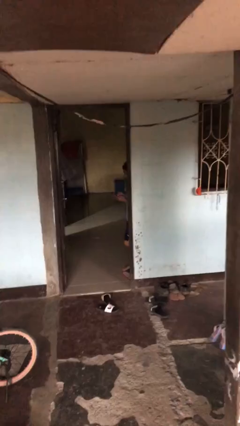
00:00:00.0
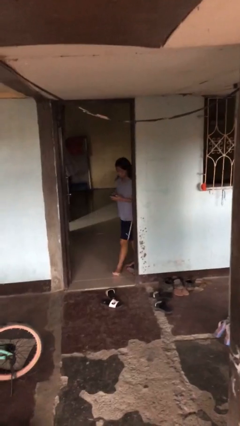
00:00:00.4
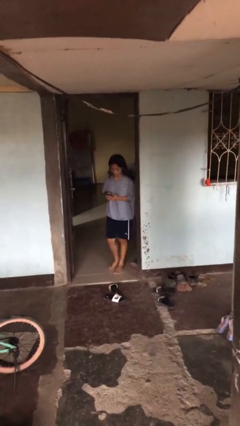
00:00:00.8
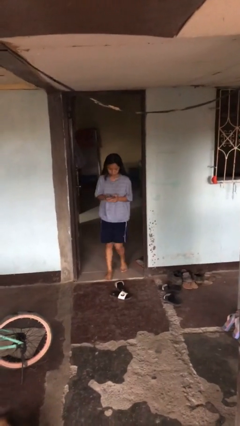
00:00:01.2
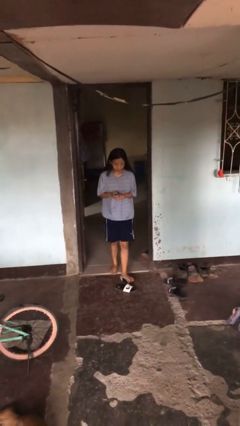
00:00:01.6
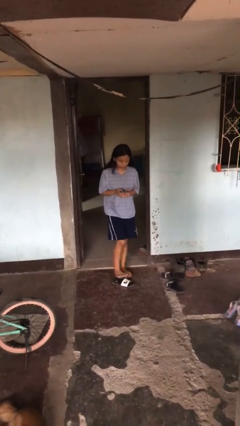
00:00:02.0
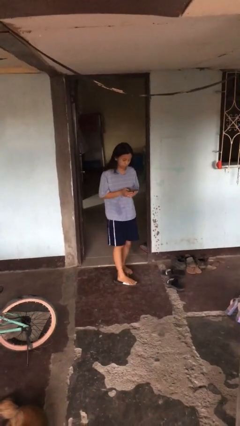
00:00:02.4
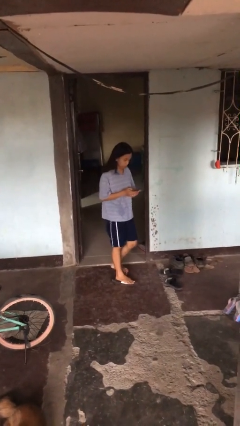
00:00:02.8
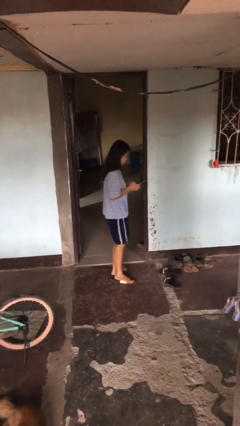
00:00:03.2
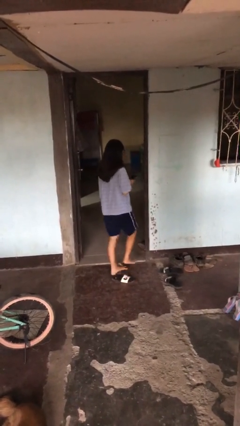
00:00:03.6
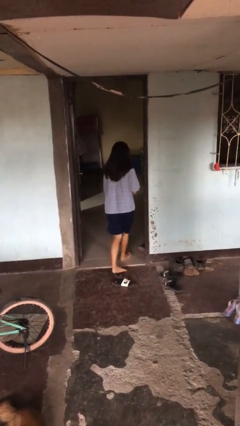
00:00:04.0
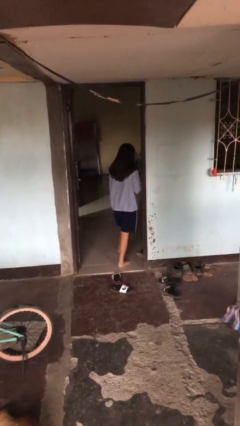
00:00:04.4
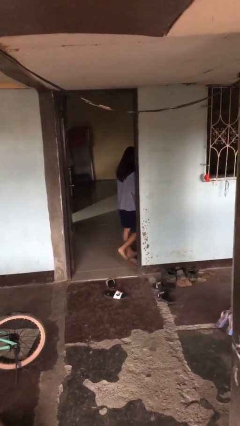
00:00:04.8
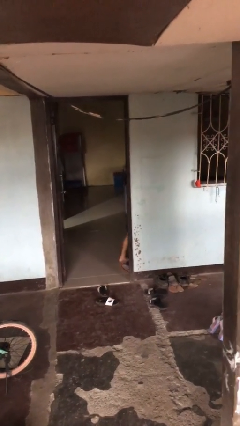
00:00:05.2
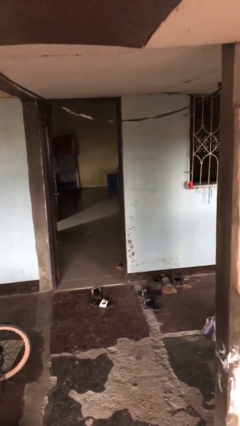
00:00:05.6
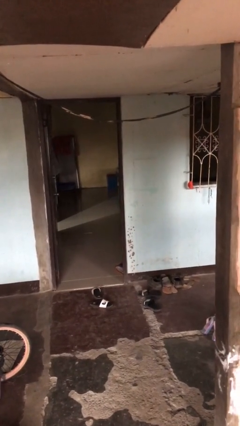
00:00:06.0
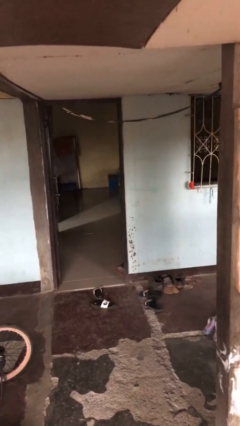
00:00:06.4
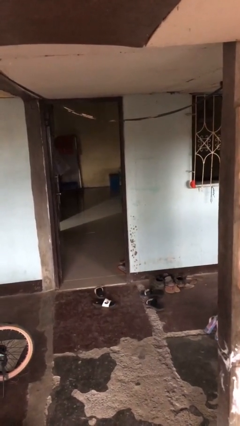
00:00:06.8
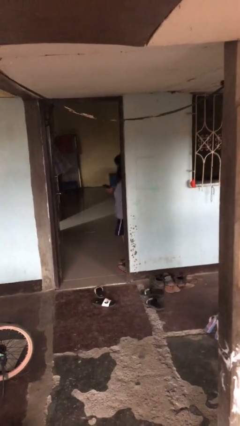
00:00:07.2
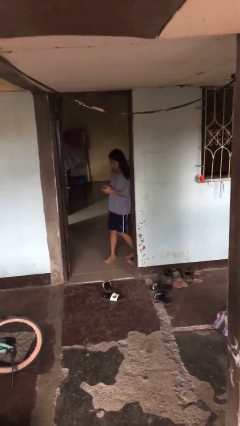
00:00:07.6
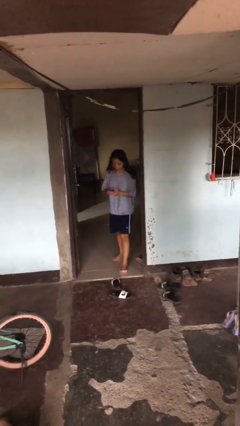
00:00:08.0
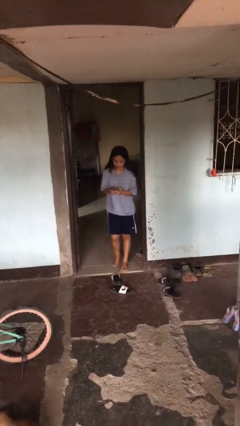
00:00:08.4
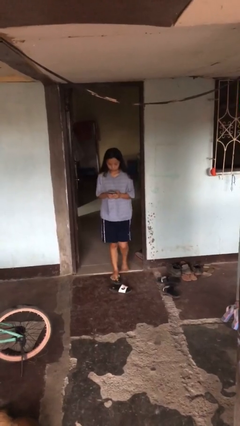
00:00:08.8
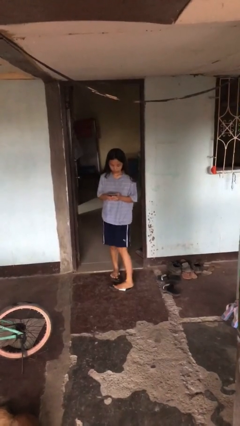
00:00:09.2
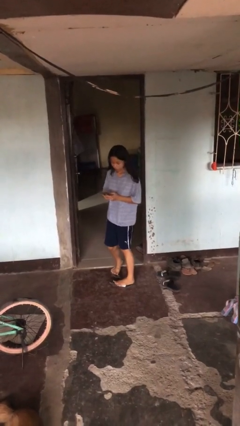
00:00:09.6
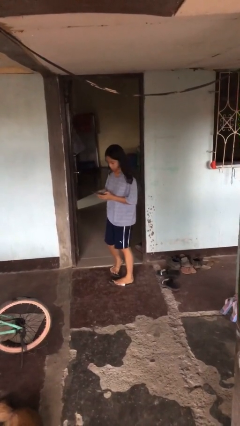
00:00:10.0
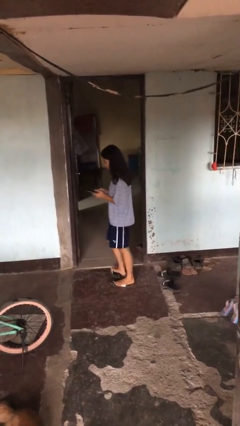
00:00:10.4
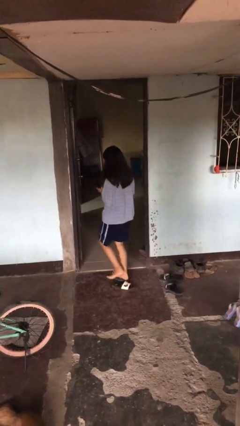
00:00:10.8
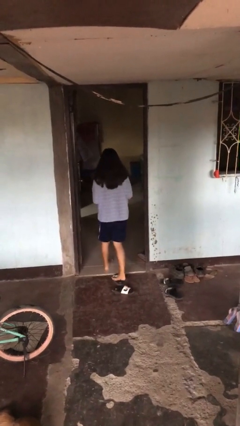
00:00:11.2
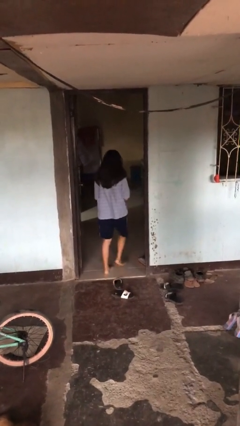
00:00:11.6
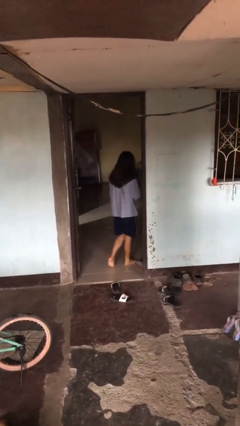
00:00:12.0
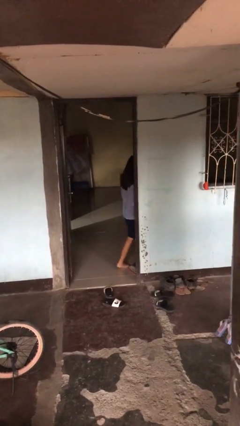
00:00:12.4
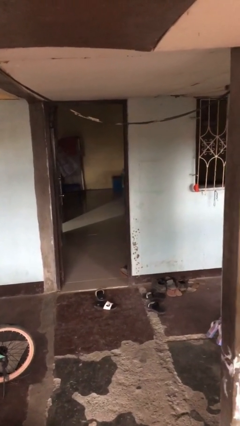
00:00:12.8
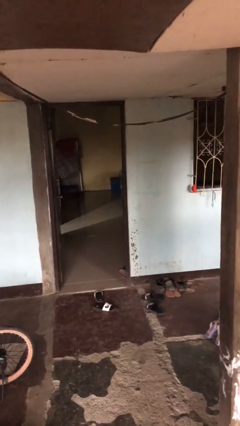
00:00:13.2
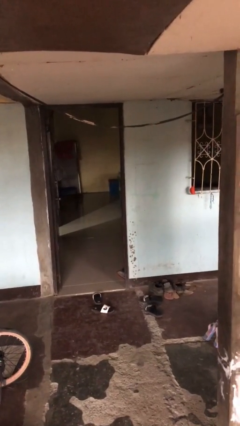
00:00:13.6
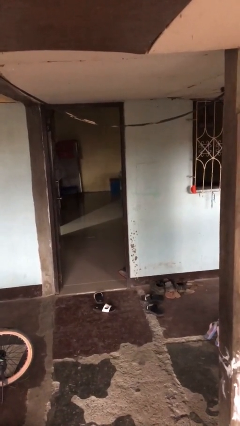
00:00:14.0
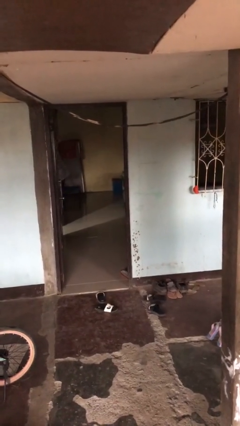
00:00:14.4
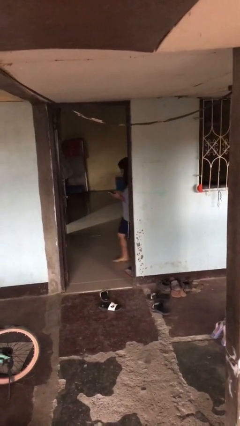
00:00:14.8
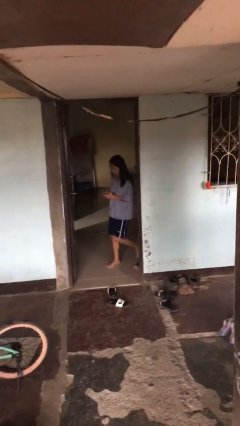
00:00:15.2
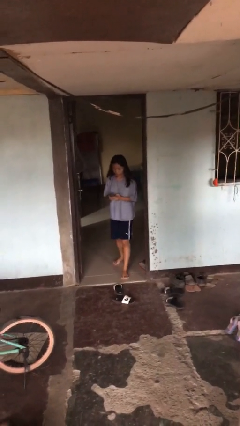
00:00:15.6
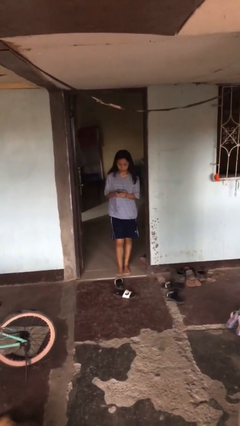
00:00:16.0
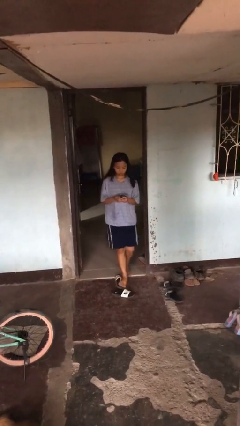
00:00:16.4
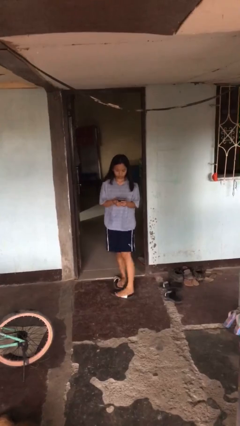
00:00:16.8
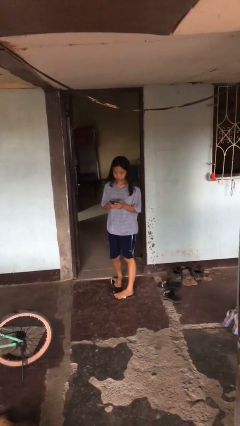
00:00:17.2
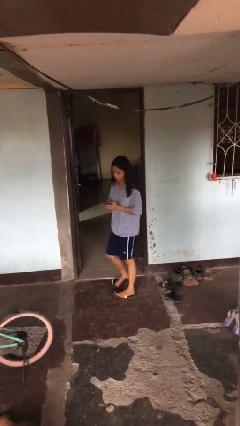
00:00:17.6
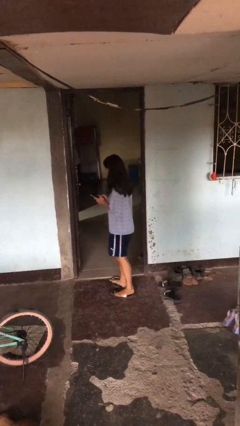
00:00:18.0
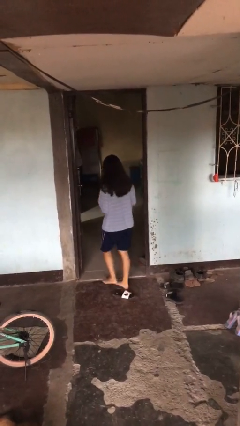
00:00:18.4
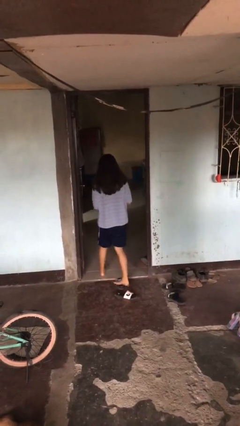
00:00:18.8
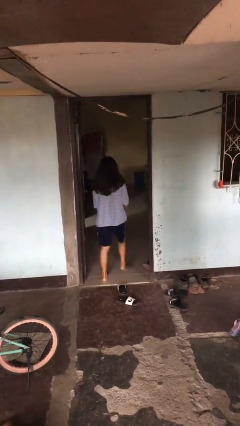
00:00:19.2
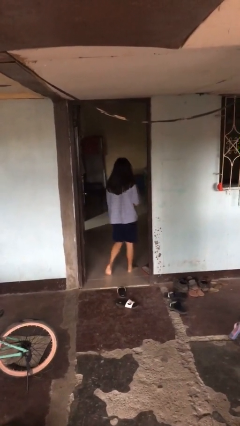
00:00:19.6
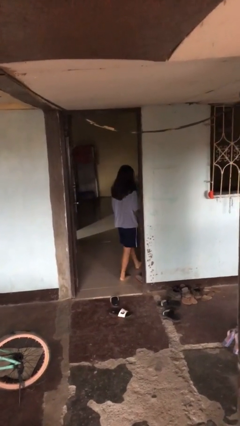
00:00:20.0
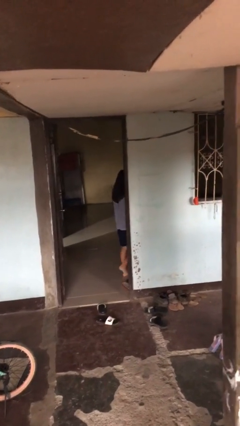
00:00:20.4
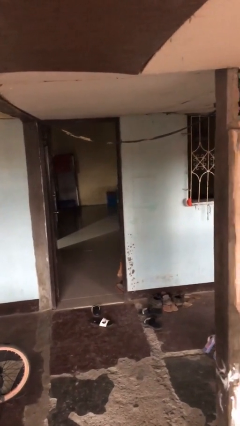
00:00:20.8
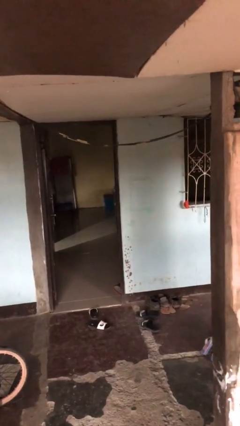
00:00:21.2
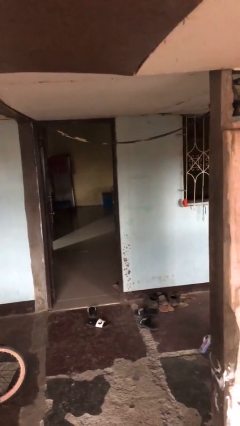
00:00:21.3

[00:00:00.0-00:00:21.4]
person texts on phone

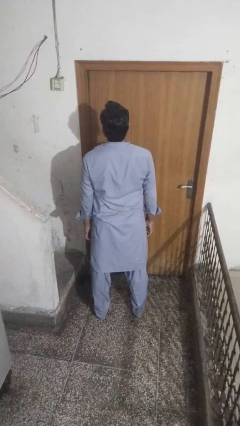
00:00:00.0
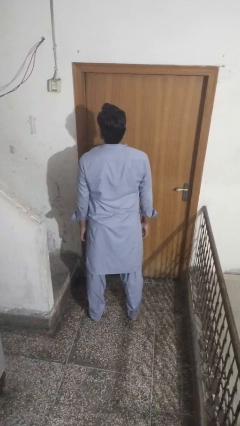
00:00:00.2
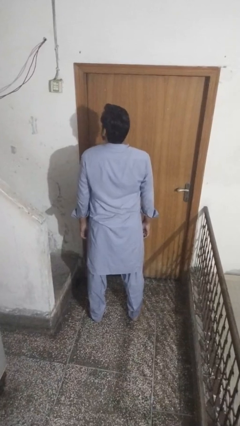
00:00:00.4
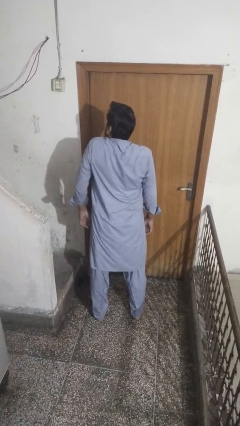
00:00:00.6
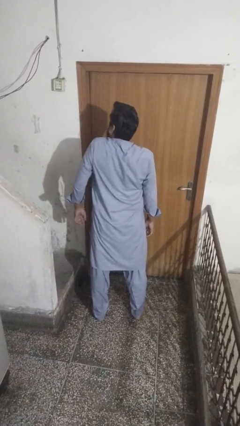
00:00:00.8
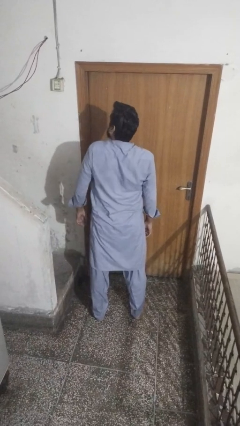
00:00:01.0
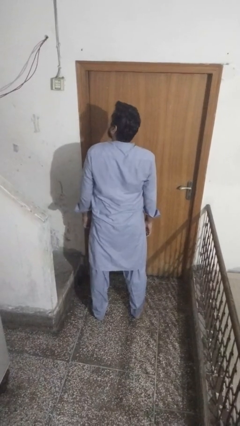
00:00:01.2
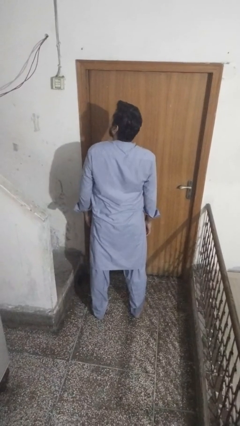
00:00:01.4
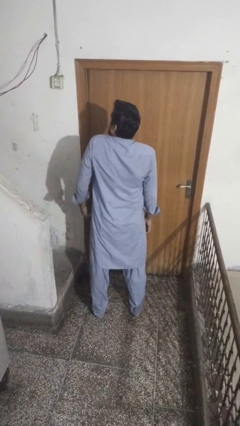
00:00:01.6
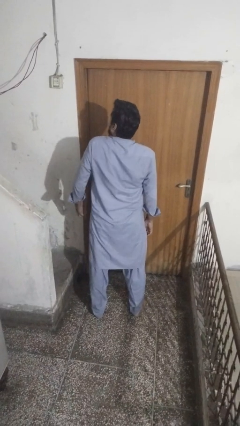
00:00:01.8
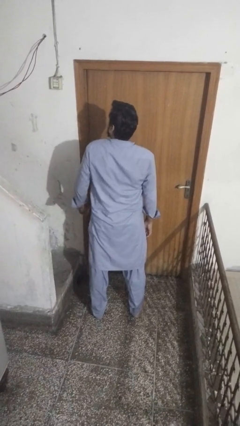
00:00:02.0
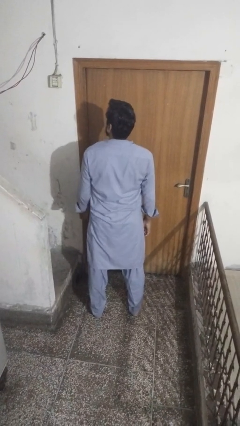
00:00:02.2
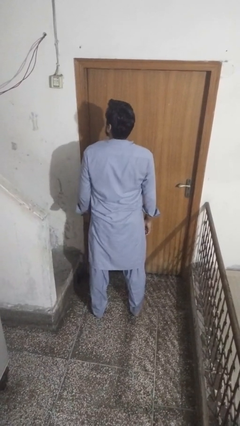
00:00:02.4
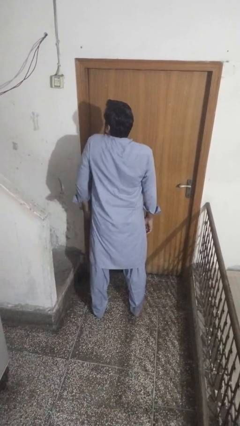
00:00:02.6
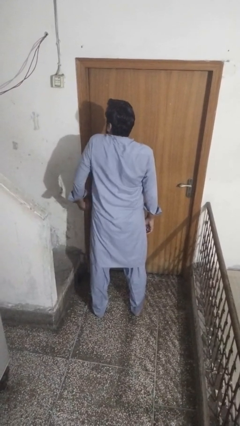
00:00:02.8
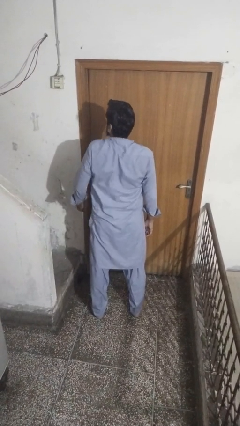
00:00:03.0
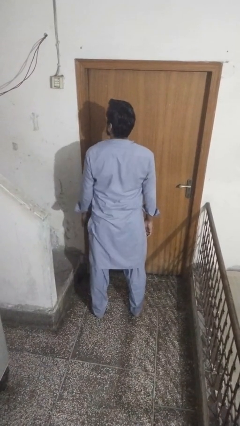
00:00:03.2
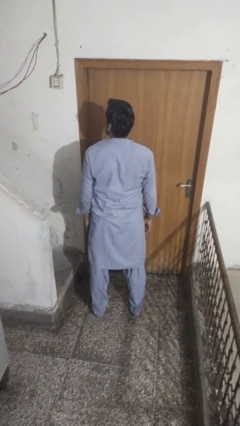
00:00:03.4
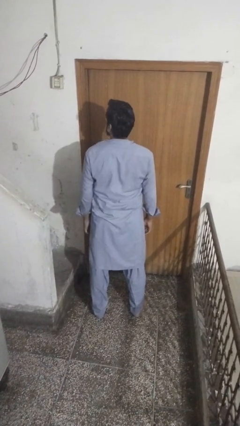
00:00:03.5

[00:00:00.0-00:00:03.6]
person shrugs

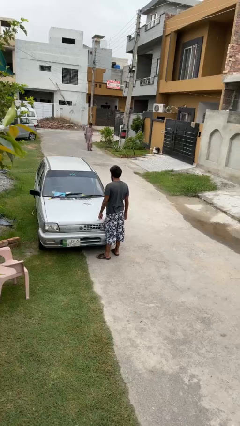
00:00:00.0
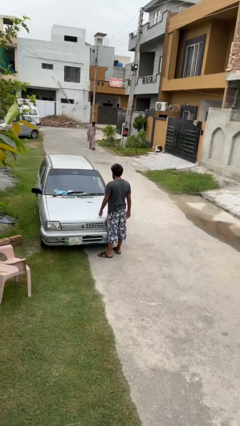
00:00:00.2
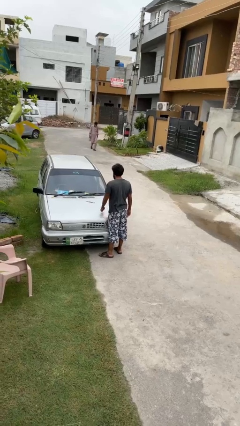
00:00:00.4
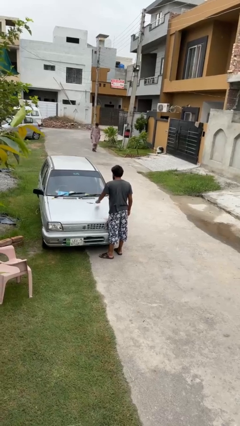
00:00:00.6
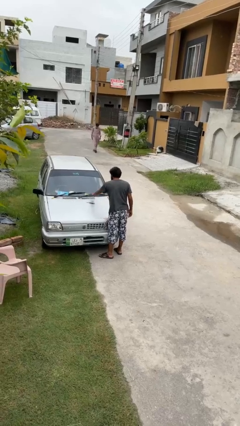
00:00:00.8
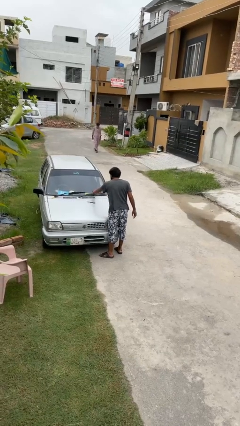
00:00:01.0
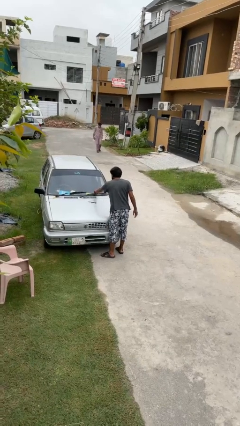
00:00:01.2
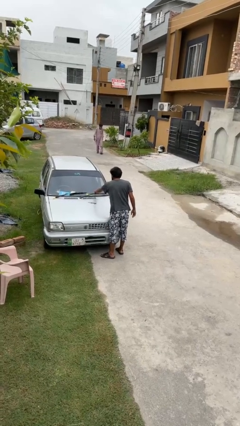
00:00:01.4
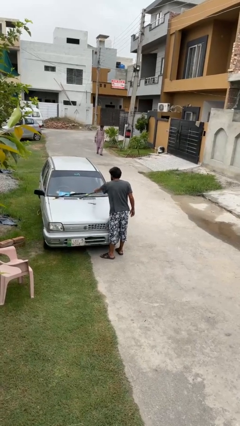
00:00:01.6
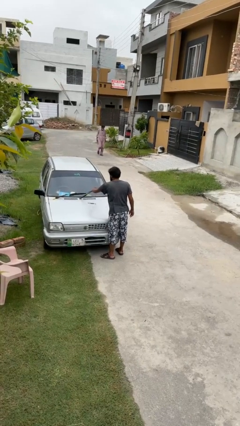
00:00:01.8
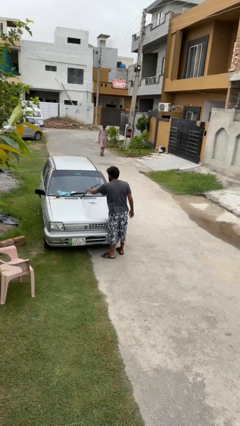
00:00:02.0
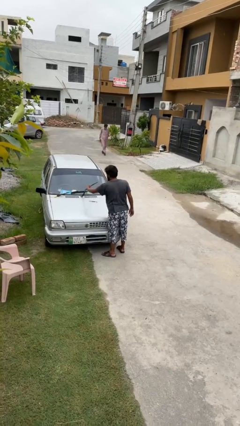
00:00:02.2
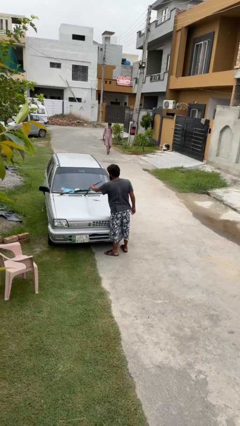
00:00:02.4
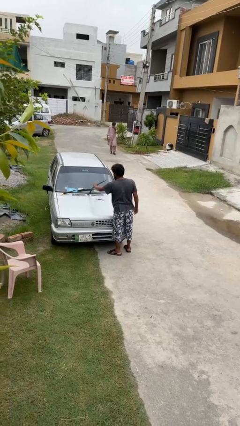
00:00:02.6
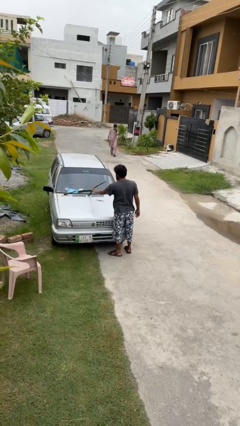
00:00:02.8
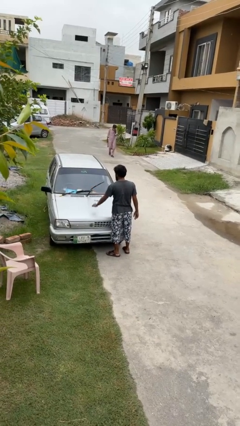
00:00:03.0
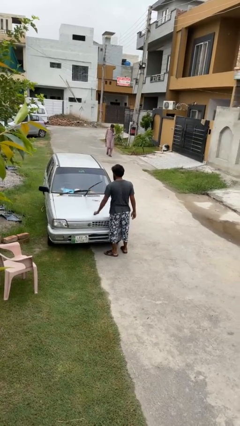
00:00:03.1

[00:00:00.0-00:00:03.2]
person flips up car wipers

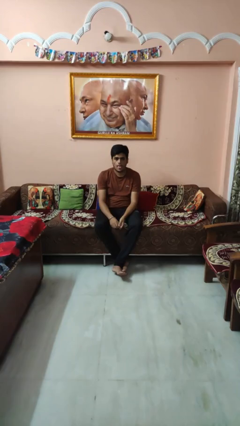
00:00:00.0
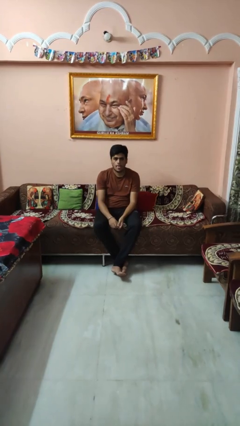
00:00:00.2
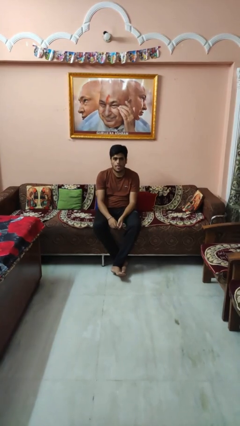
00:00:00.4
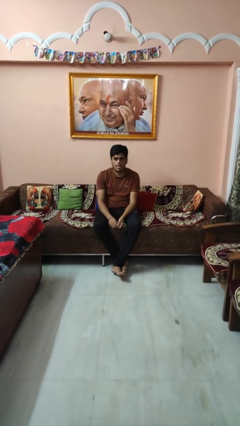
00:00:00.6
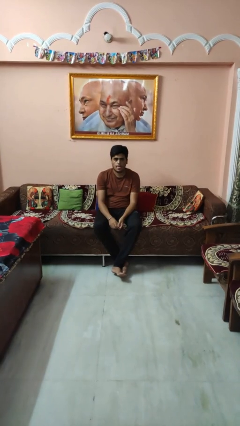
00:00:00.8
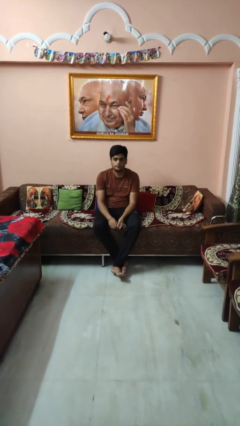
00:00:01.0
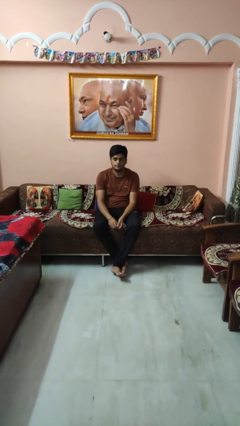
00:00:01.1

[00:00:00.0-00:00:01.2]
person sticks out tongue
